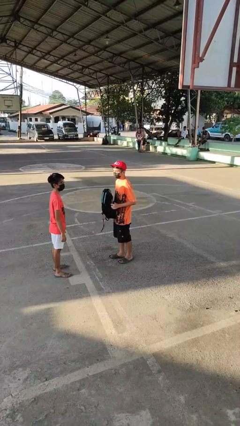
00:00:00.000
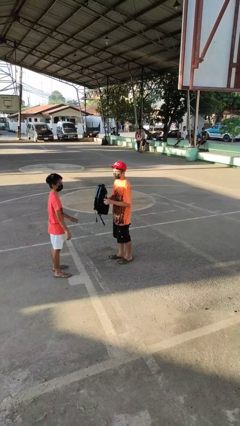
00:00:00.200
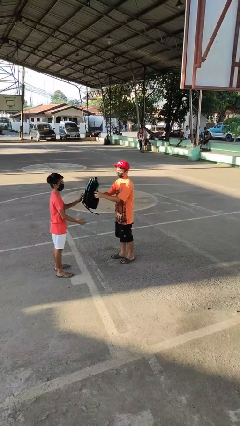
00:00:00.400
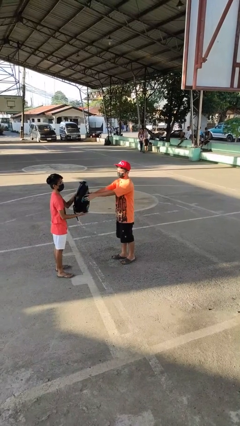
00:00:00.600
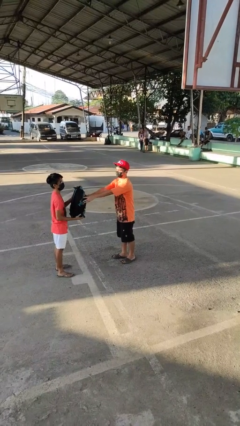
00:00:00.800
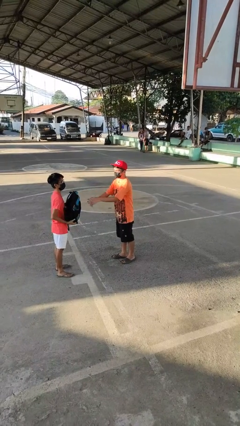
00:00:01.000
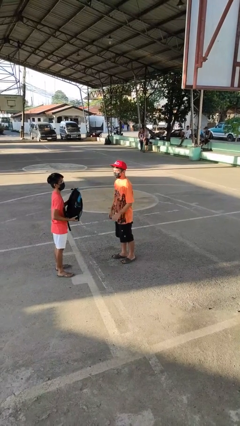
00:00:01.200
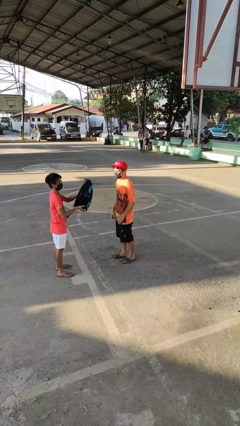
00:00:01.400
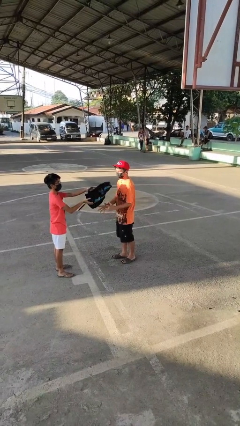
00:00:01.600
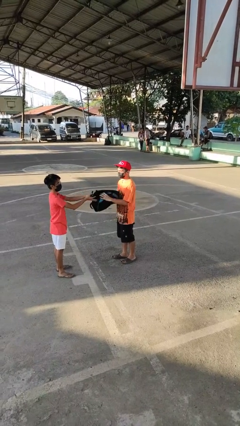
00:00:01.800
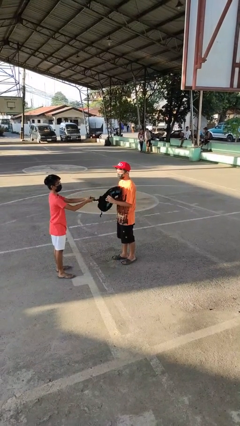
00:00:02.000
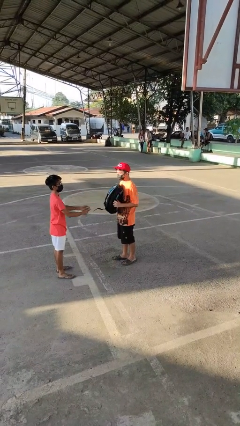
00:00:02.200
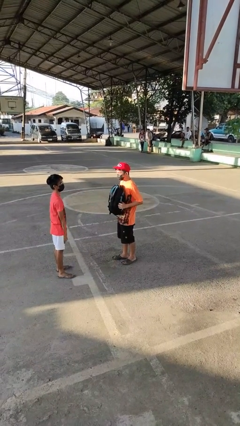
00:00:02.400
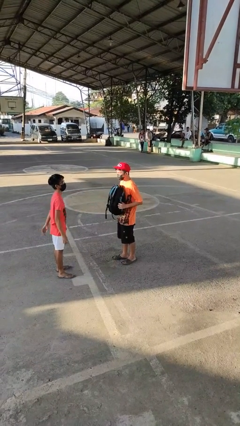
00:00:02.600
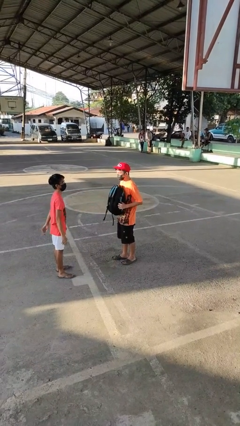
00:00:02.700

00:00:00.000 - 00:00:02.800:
person transfers object to person

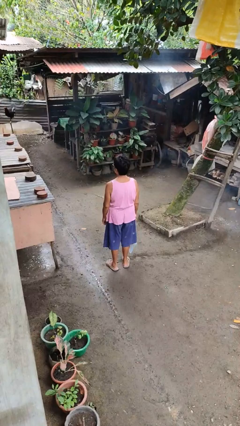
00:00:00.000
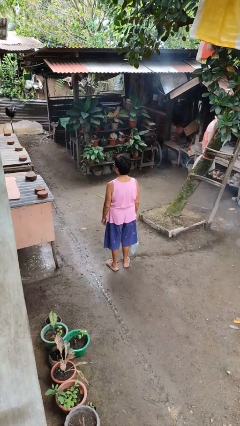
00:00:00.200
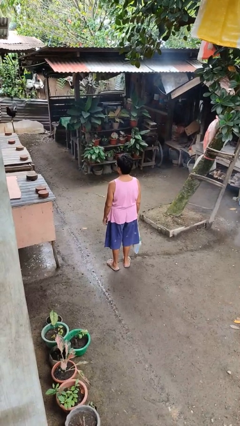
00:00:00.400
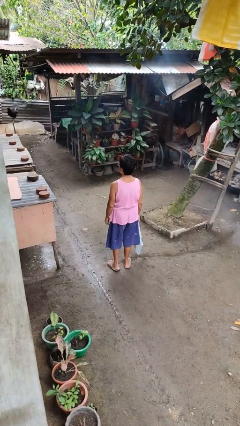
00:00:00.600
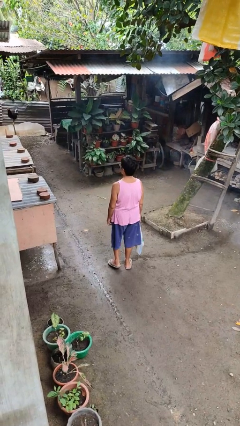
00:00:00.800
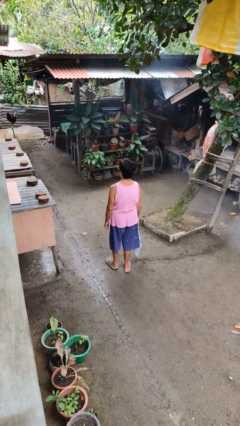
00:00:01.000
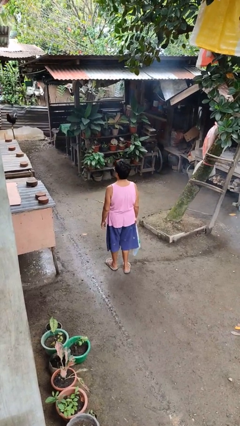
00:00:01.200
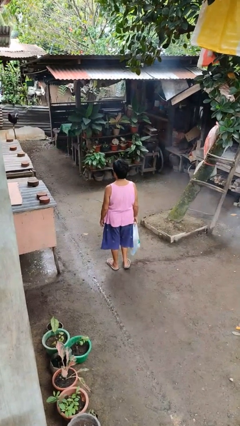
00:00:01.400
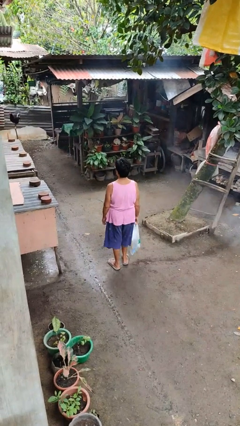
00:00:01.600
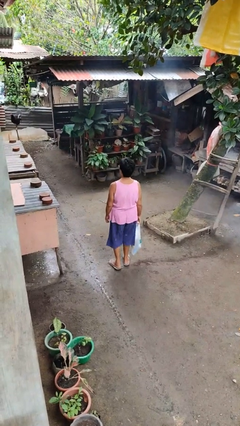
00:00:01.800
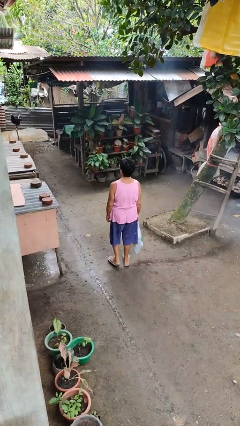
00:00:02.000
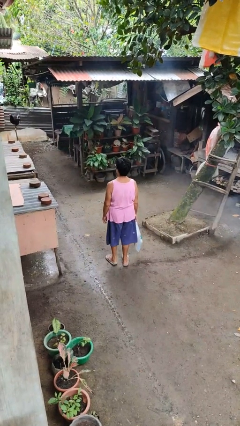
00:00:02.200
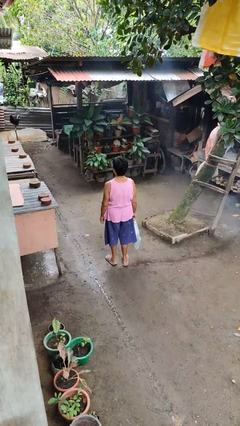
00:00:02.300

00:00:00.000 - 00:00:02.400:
person carries groceries

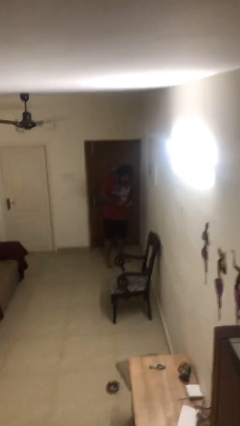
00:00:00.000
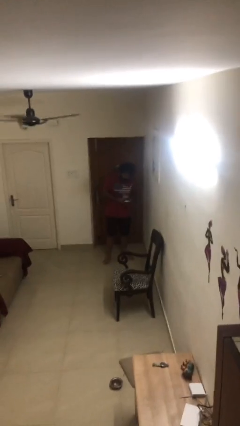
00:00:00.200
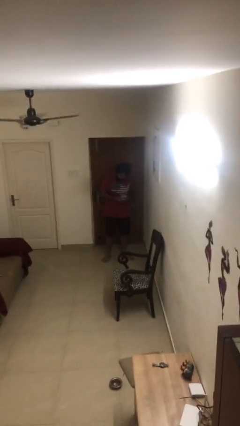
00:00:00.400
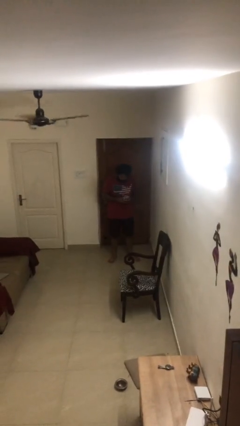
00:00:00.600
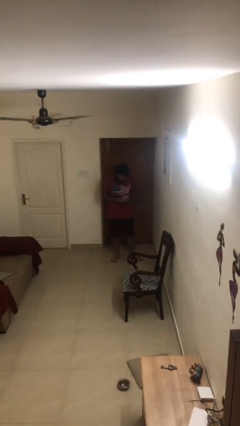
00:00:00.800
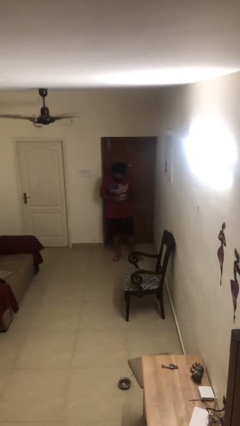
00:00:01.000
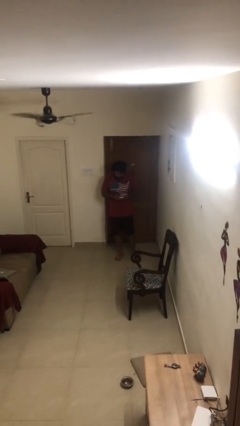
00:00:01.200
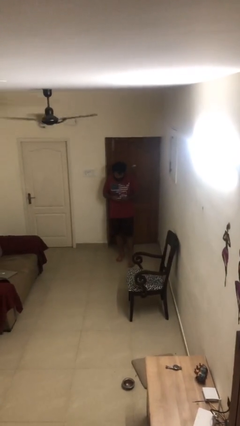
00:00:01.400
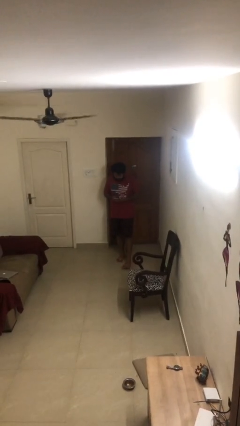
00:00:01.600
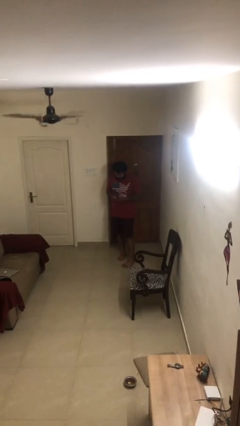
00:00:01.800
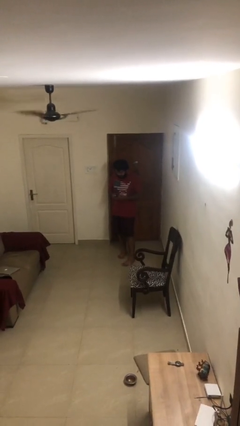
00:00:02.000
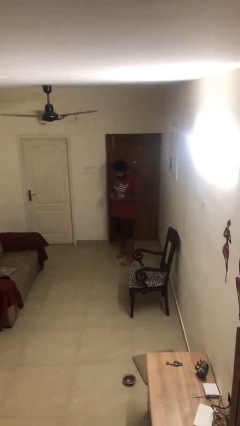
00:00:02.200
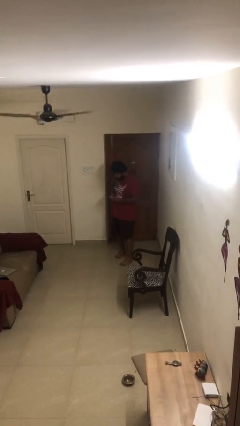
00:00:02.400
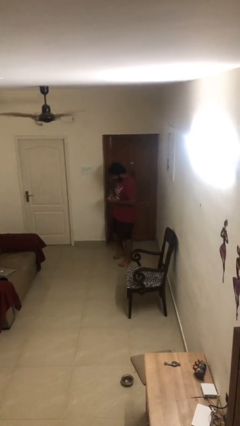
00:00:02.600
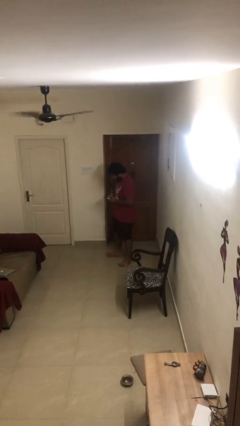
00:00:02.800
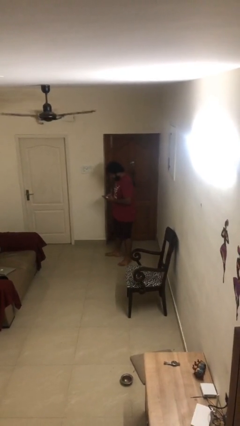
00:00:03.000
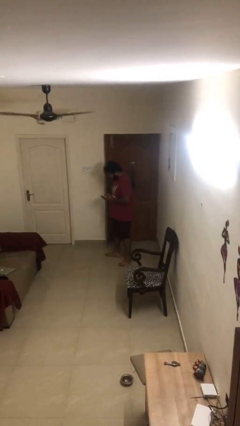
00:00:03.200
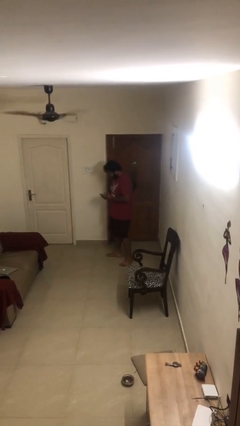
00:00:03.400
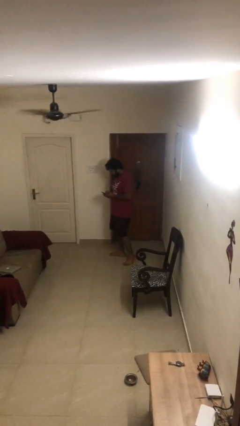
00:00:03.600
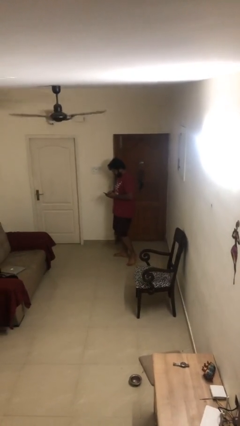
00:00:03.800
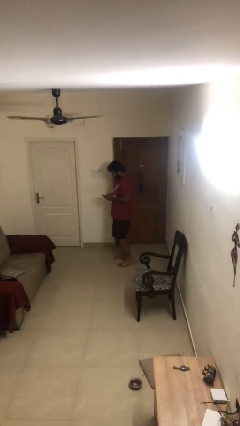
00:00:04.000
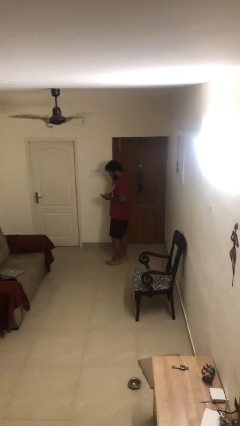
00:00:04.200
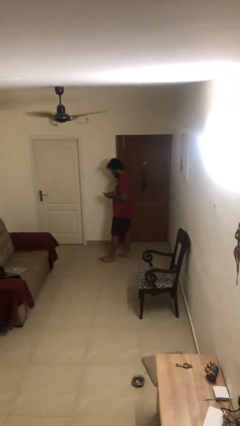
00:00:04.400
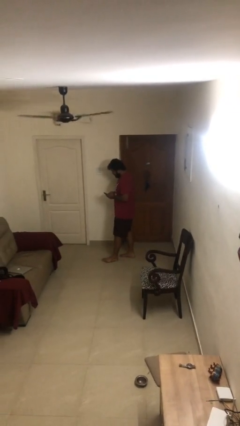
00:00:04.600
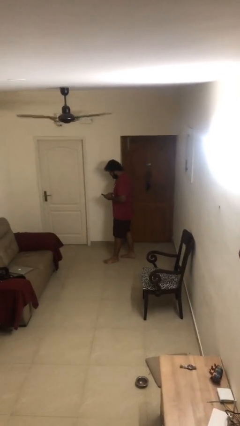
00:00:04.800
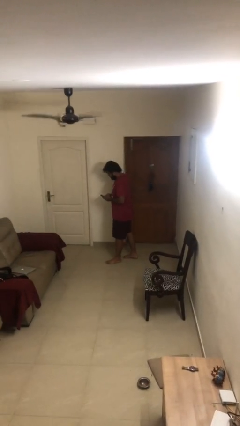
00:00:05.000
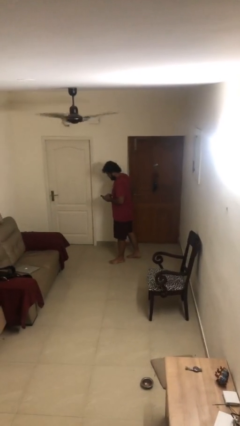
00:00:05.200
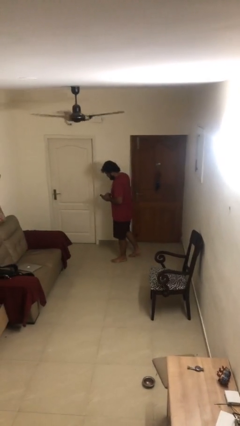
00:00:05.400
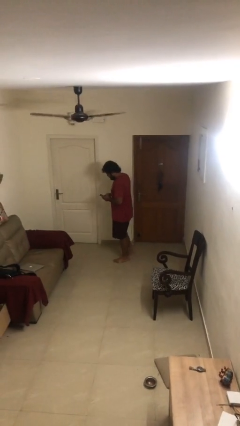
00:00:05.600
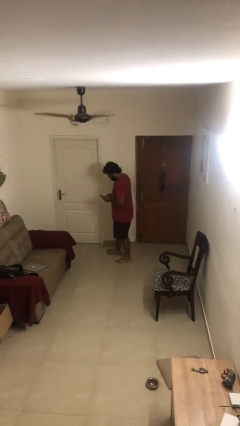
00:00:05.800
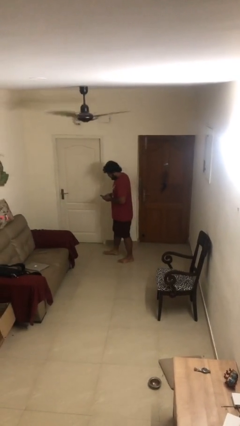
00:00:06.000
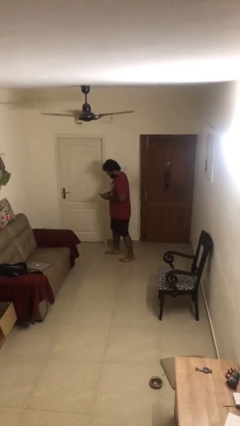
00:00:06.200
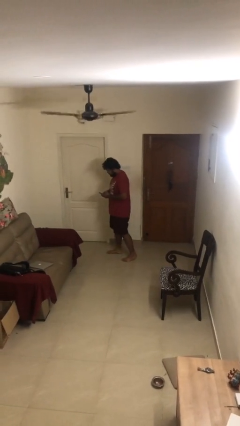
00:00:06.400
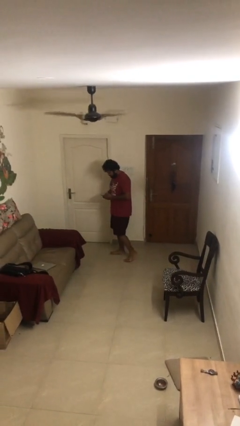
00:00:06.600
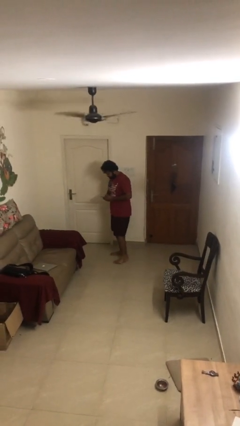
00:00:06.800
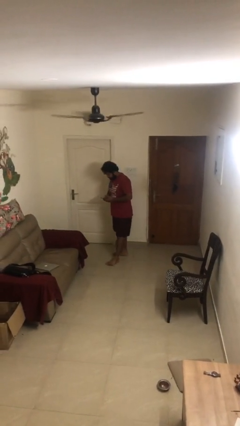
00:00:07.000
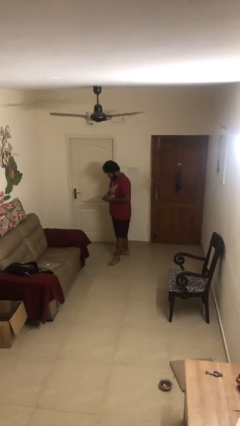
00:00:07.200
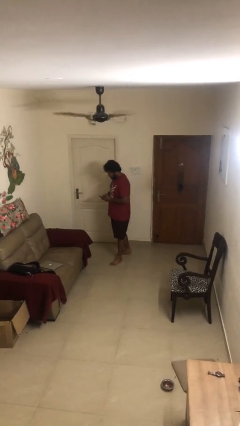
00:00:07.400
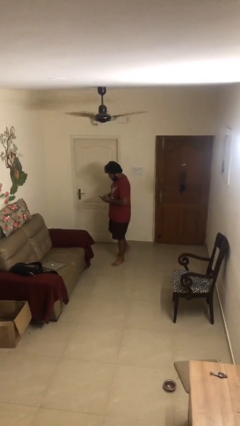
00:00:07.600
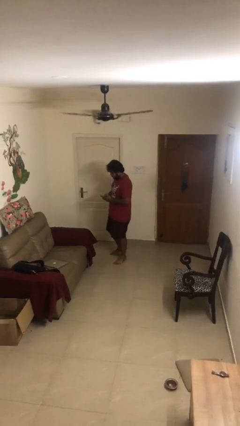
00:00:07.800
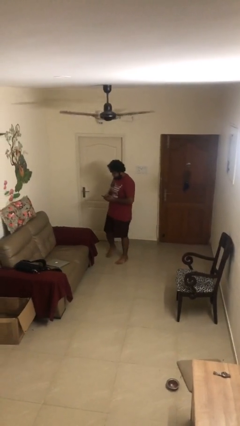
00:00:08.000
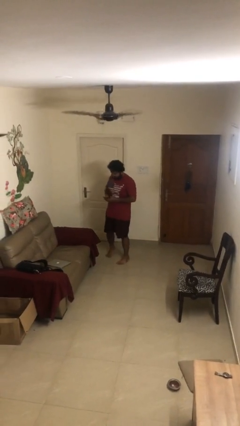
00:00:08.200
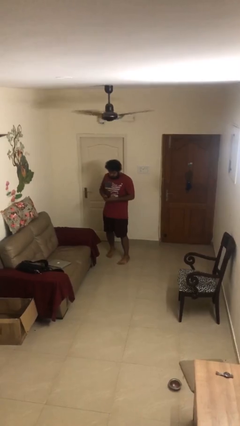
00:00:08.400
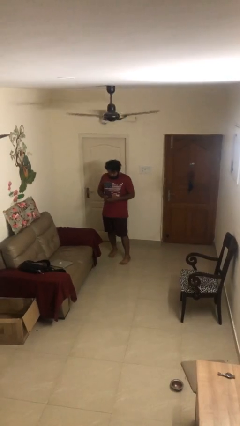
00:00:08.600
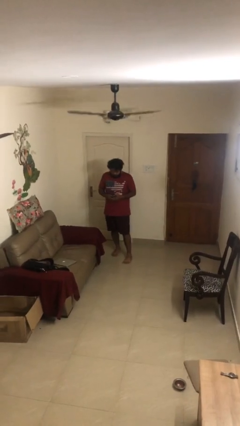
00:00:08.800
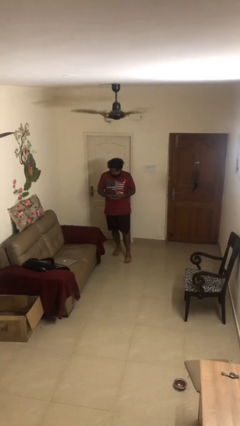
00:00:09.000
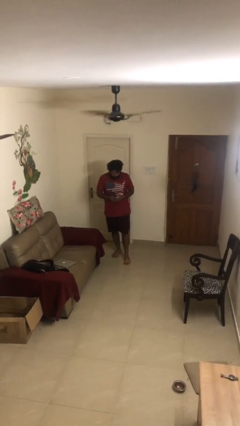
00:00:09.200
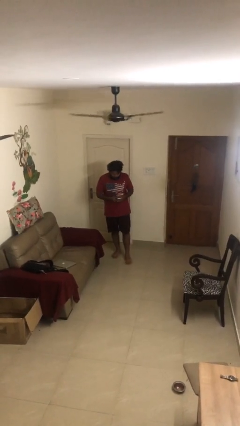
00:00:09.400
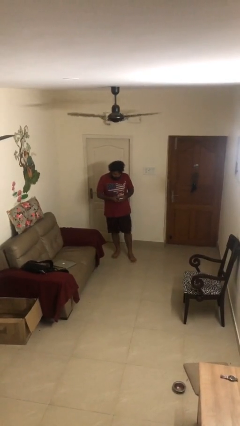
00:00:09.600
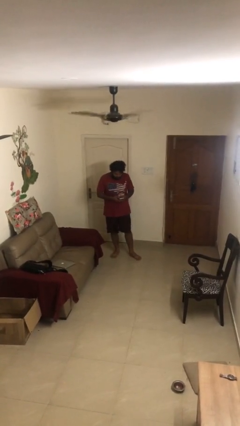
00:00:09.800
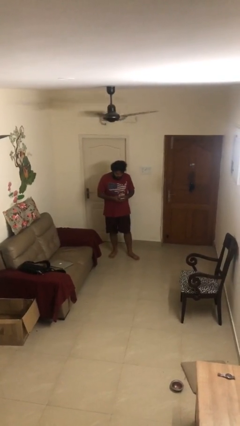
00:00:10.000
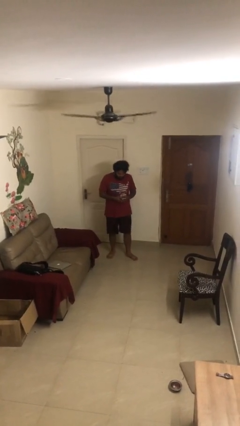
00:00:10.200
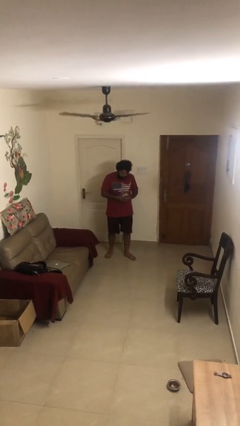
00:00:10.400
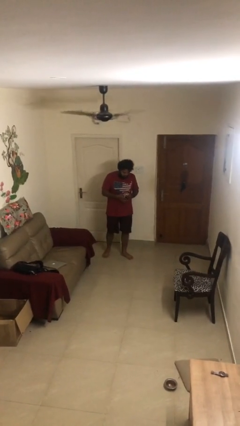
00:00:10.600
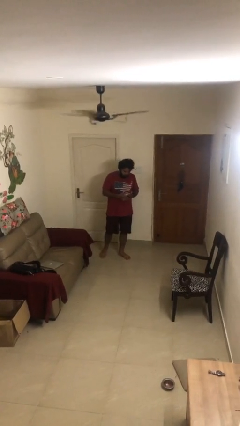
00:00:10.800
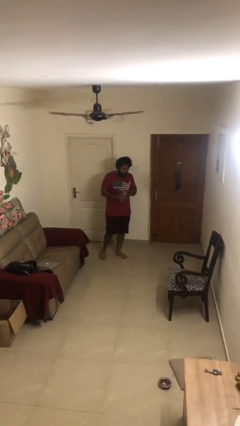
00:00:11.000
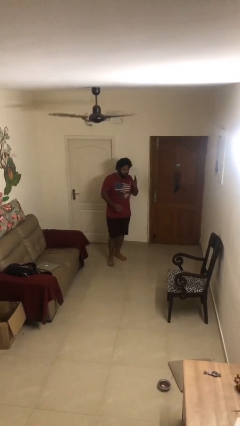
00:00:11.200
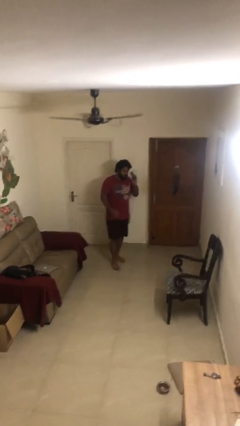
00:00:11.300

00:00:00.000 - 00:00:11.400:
person texts on phone

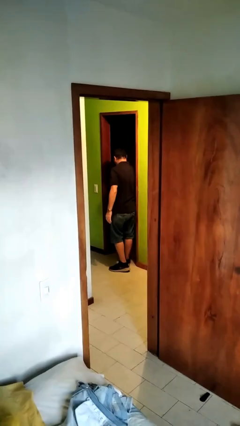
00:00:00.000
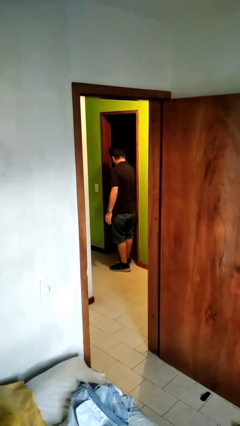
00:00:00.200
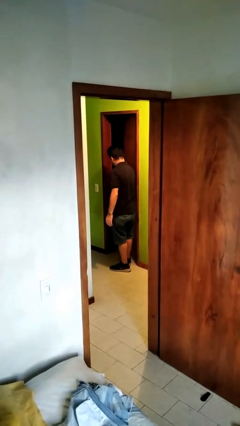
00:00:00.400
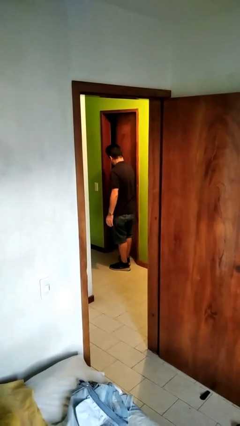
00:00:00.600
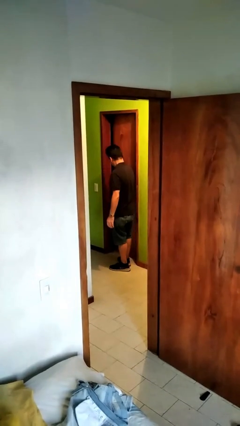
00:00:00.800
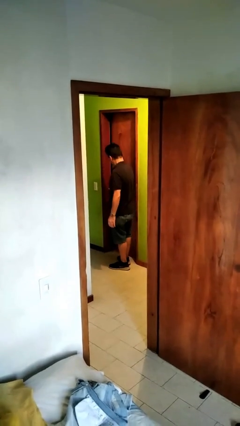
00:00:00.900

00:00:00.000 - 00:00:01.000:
person closes facility door
